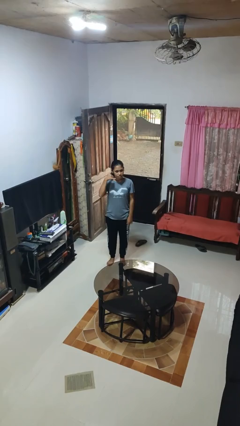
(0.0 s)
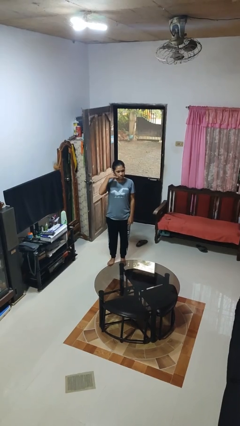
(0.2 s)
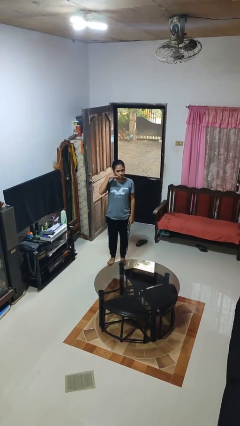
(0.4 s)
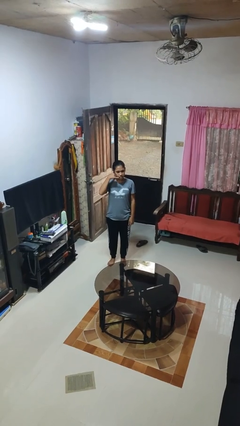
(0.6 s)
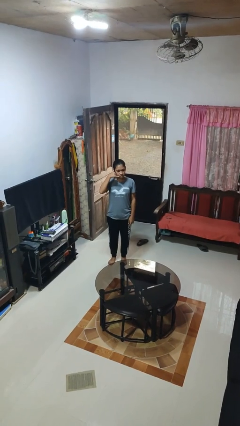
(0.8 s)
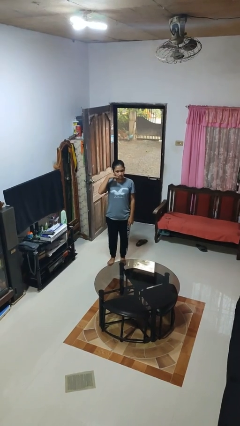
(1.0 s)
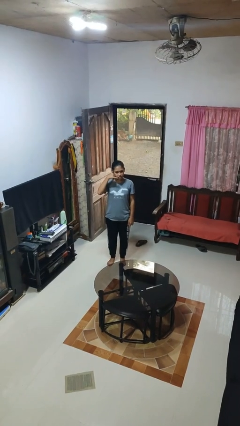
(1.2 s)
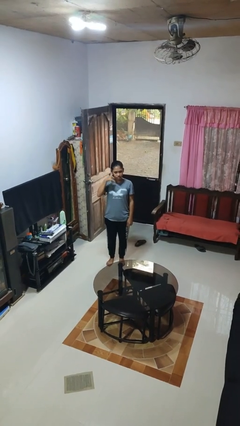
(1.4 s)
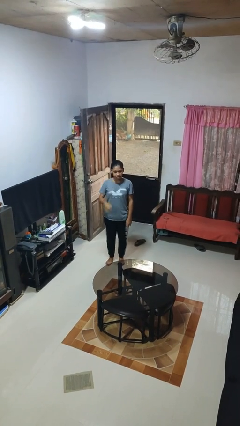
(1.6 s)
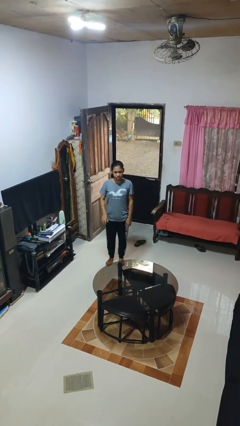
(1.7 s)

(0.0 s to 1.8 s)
person gestures call me

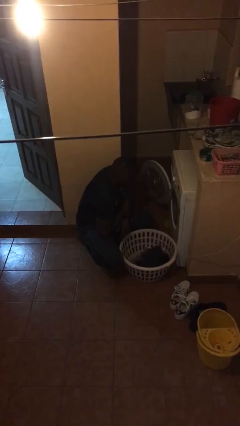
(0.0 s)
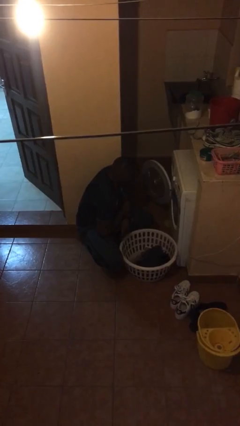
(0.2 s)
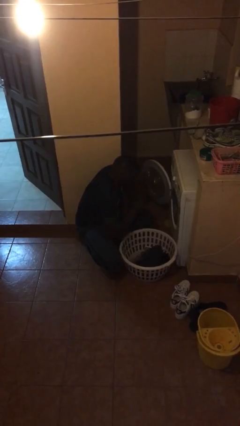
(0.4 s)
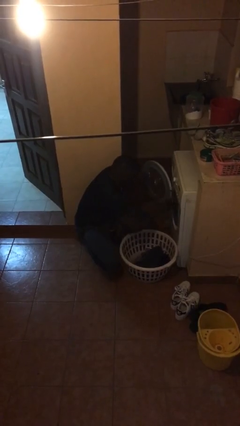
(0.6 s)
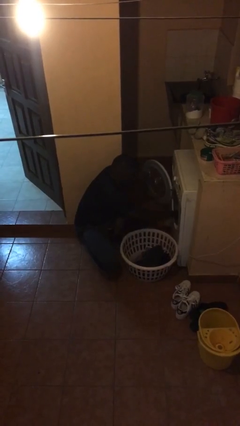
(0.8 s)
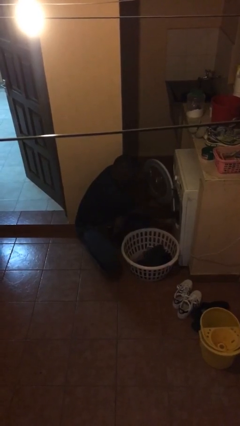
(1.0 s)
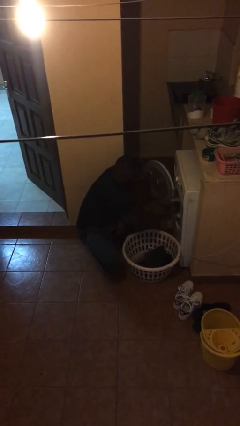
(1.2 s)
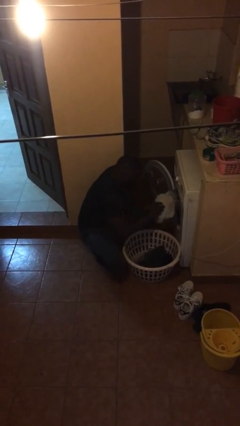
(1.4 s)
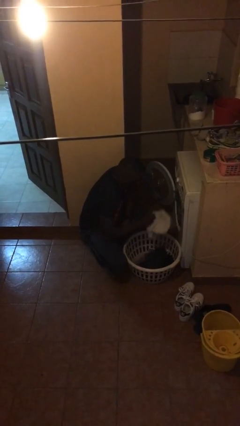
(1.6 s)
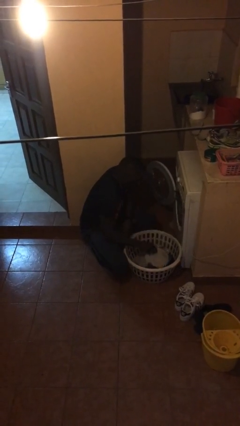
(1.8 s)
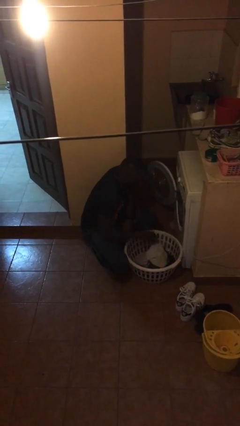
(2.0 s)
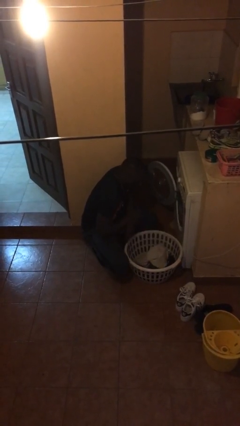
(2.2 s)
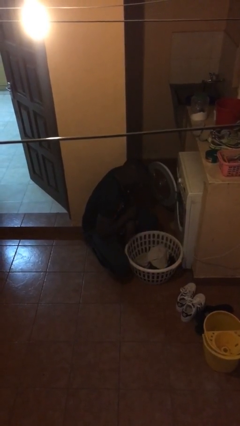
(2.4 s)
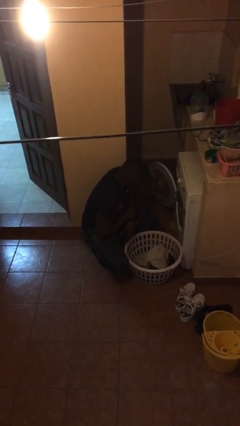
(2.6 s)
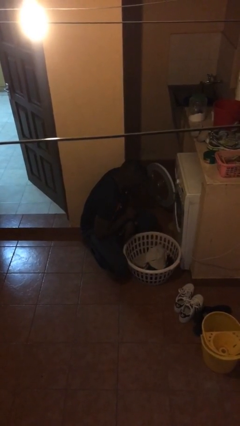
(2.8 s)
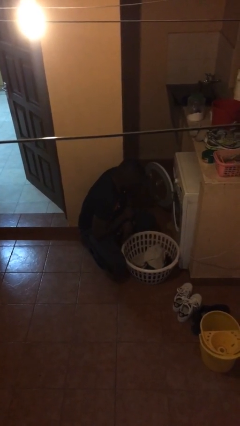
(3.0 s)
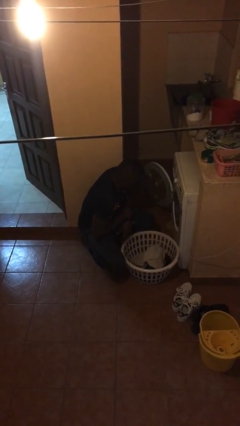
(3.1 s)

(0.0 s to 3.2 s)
person unloads clotheswasher

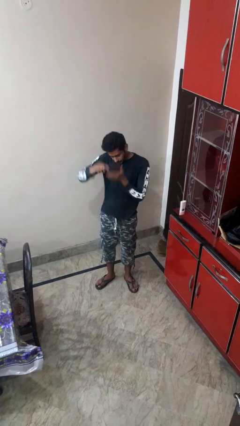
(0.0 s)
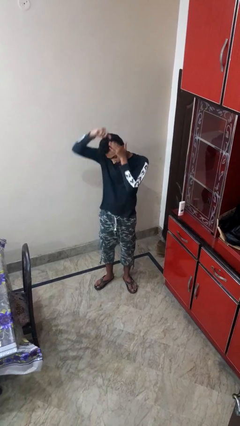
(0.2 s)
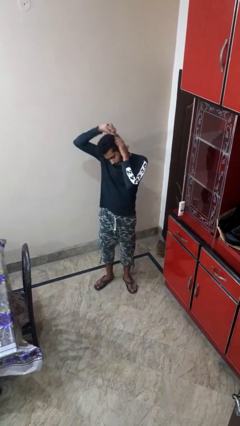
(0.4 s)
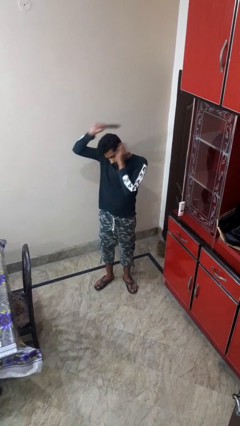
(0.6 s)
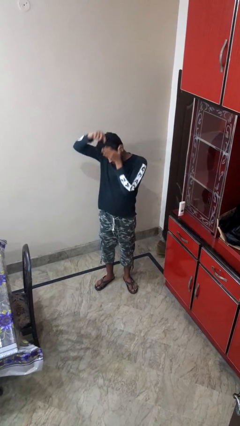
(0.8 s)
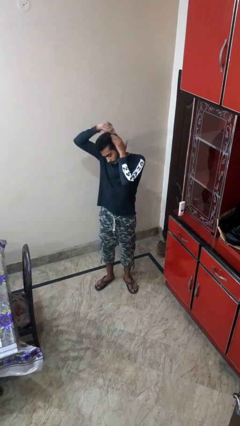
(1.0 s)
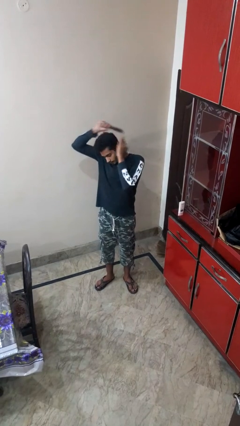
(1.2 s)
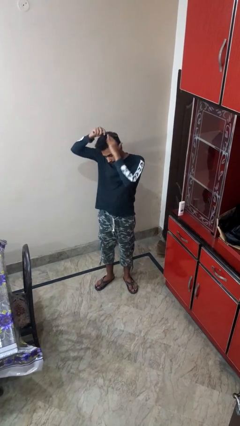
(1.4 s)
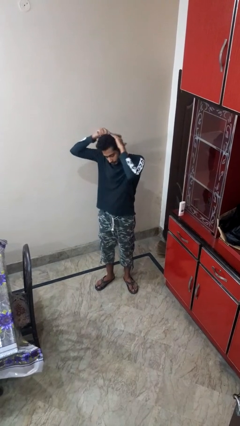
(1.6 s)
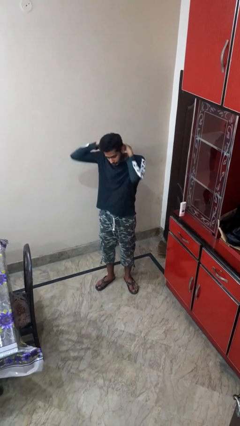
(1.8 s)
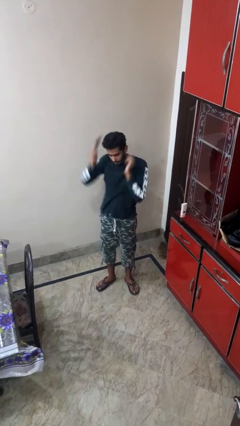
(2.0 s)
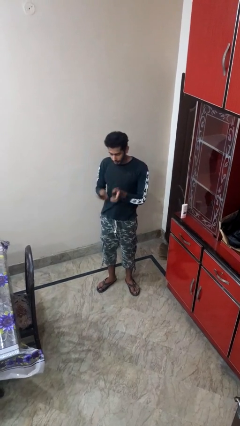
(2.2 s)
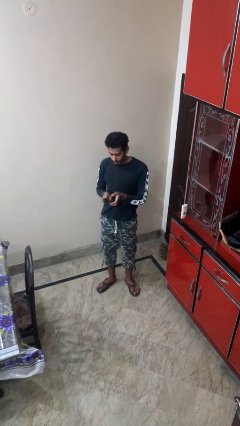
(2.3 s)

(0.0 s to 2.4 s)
person brushes hair

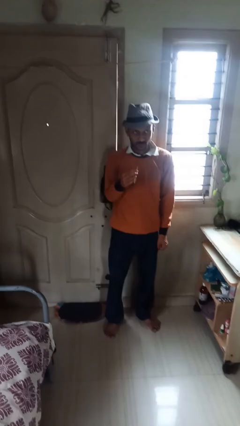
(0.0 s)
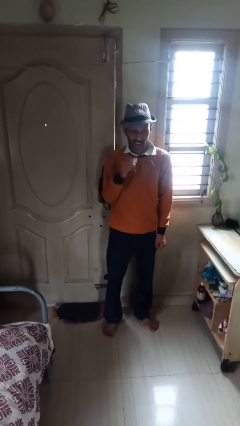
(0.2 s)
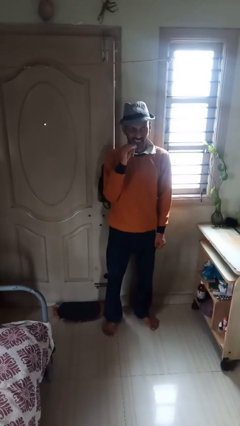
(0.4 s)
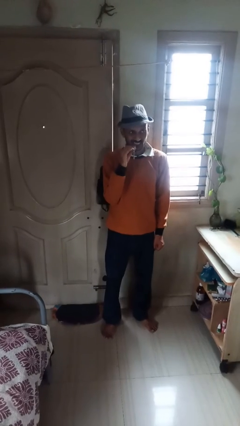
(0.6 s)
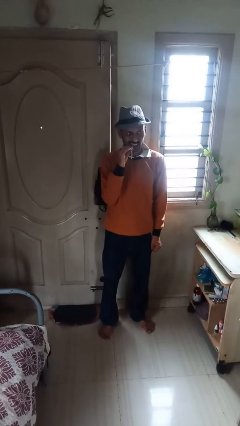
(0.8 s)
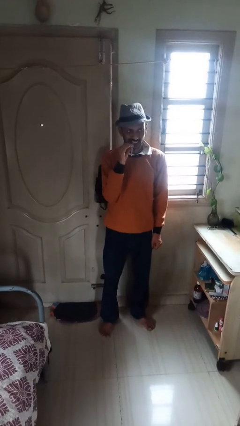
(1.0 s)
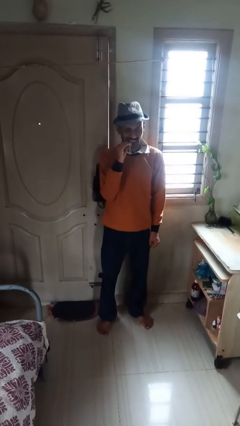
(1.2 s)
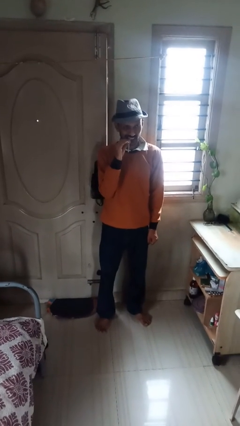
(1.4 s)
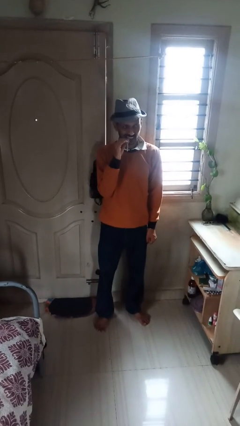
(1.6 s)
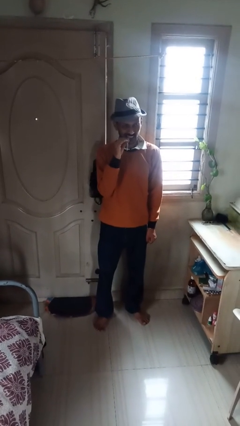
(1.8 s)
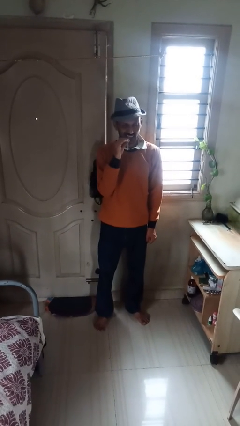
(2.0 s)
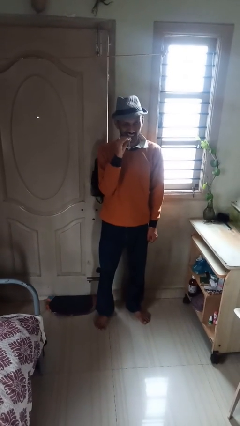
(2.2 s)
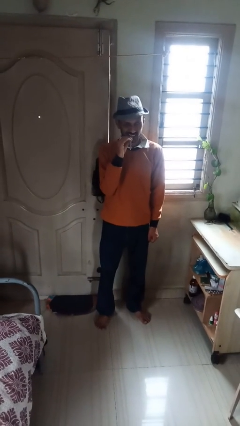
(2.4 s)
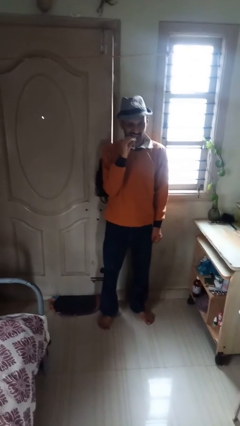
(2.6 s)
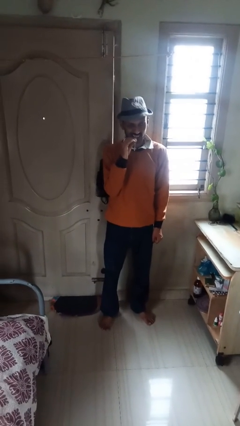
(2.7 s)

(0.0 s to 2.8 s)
person flosses

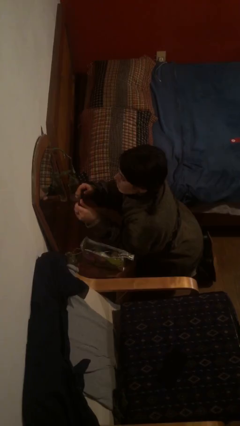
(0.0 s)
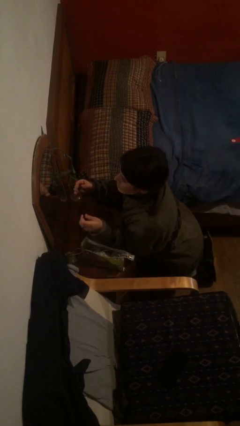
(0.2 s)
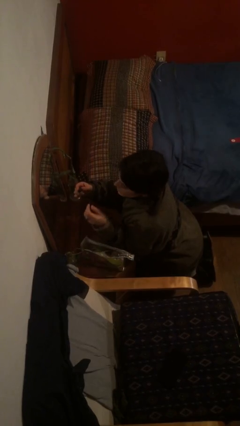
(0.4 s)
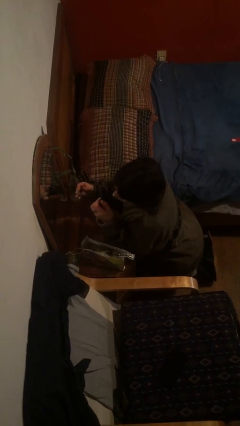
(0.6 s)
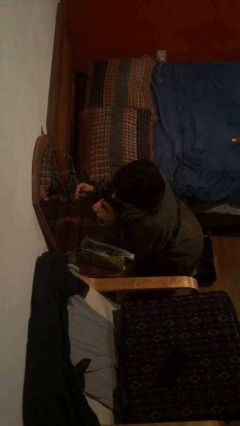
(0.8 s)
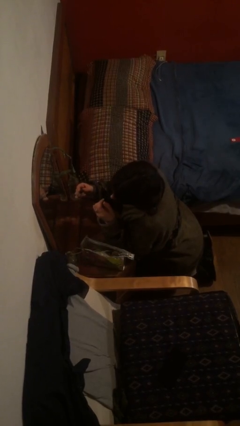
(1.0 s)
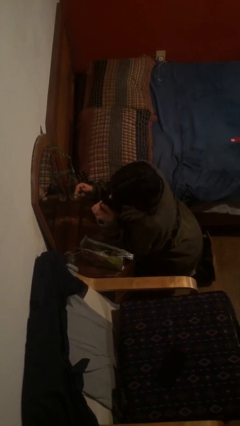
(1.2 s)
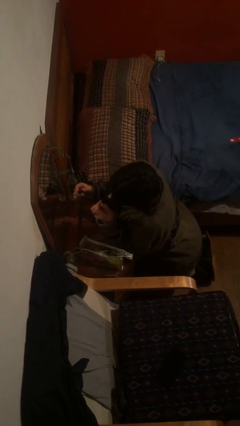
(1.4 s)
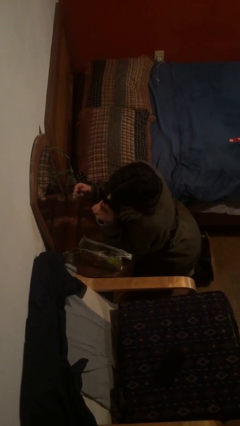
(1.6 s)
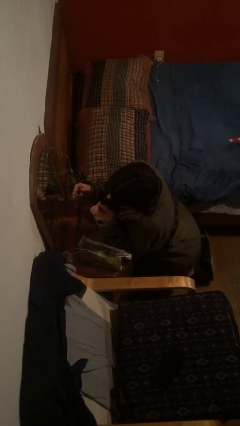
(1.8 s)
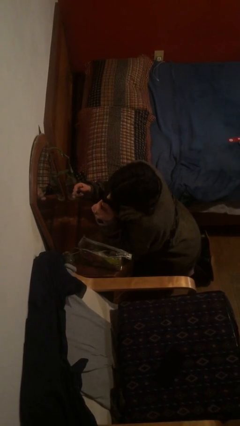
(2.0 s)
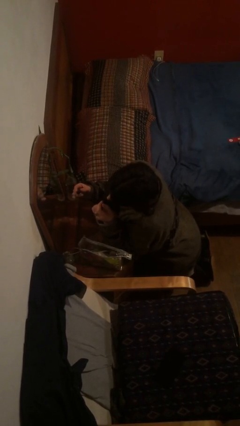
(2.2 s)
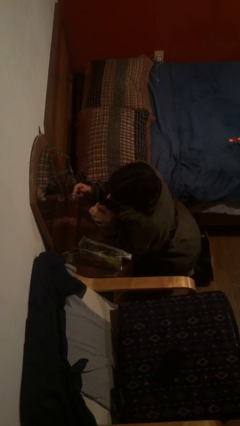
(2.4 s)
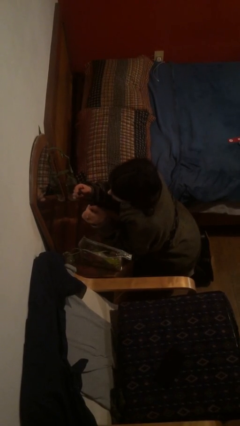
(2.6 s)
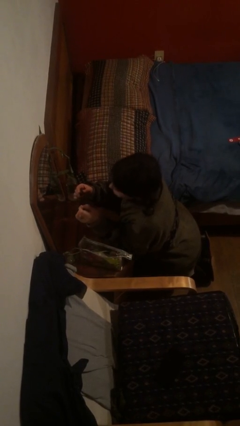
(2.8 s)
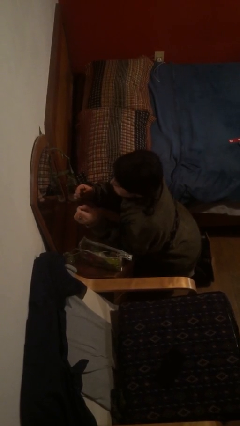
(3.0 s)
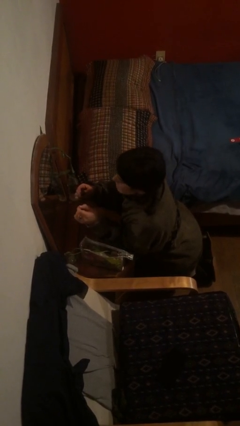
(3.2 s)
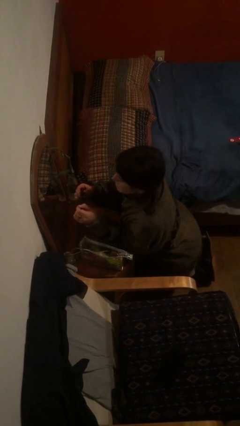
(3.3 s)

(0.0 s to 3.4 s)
person applies eye makeup

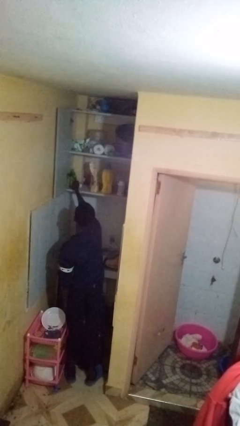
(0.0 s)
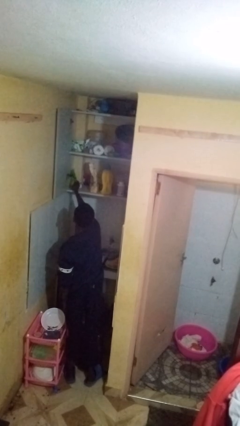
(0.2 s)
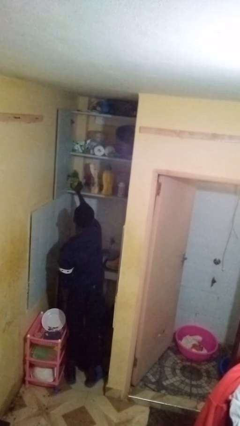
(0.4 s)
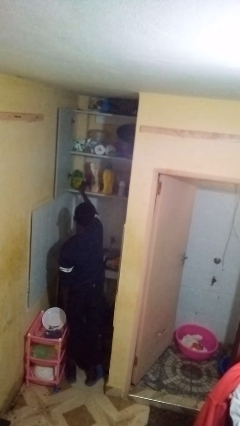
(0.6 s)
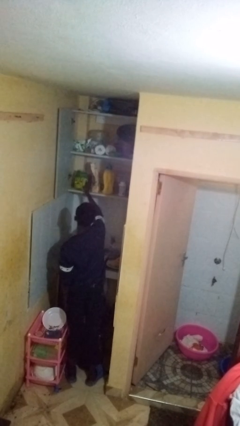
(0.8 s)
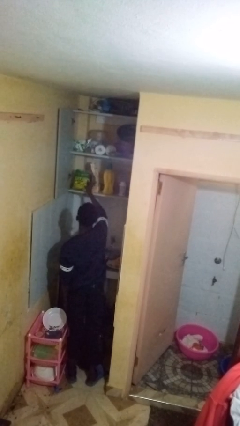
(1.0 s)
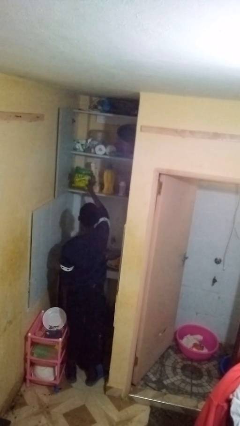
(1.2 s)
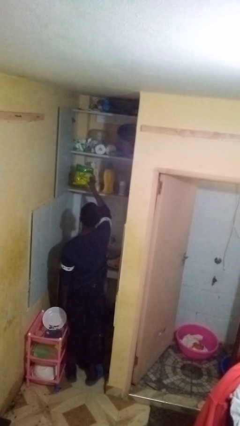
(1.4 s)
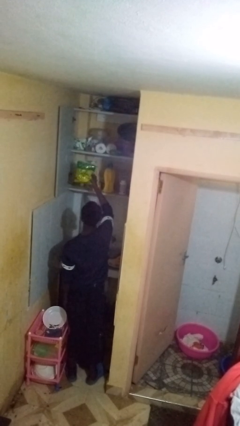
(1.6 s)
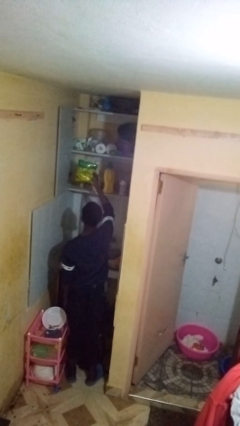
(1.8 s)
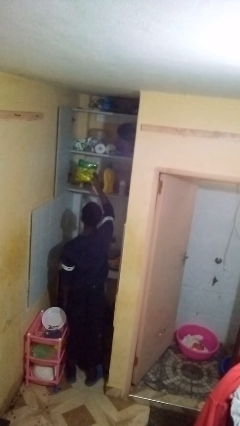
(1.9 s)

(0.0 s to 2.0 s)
person takes object from cabinet

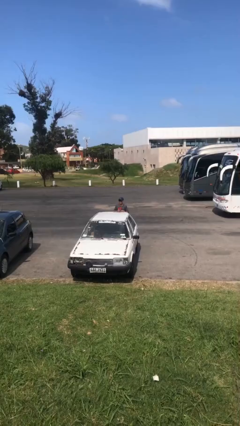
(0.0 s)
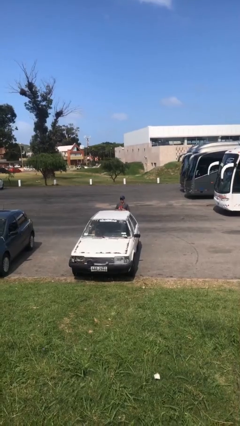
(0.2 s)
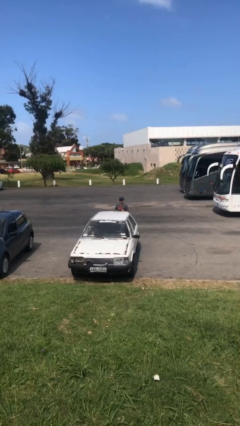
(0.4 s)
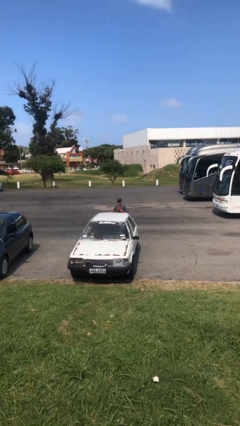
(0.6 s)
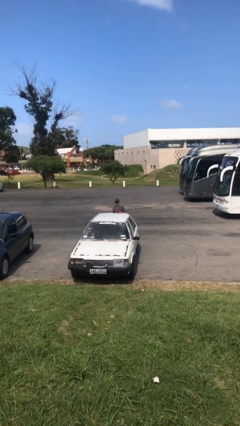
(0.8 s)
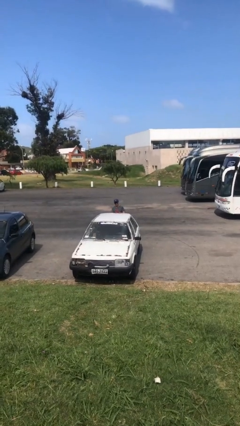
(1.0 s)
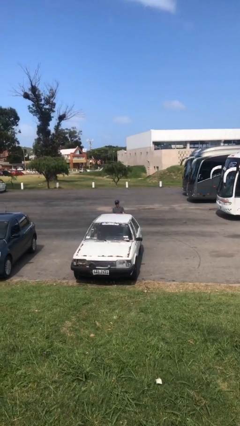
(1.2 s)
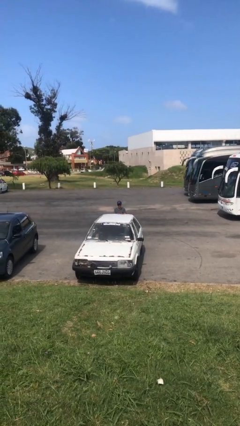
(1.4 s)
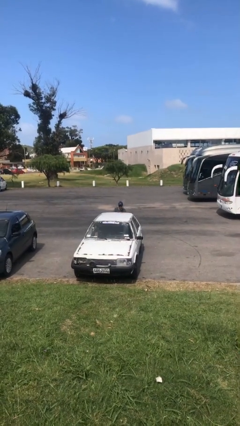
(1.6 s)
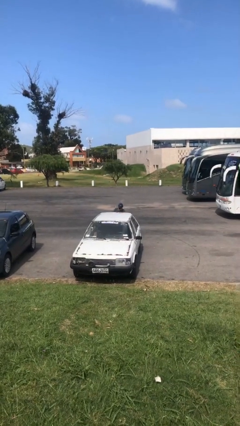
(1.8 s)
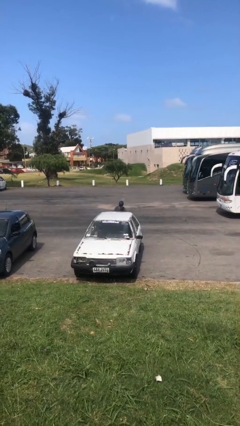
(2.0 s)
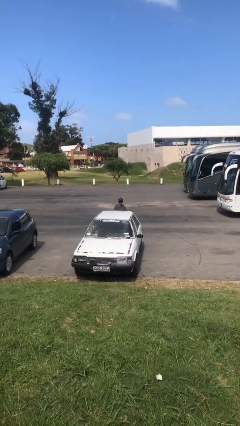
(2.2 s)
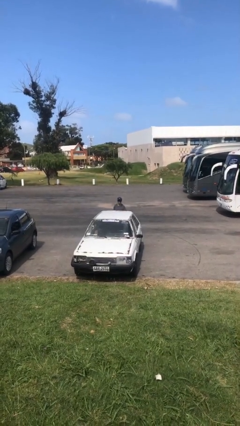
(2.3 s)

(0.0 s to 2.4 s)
person loads car
